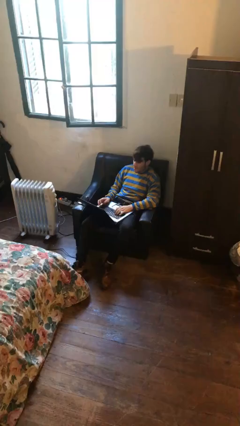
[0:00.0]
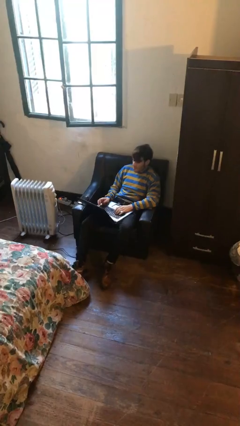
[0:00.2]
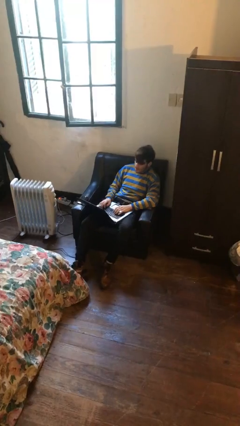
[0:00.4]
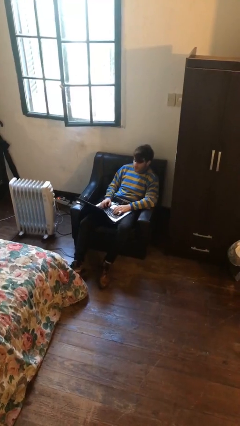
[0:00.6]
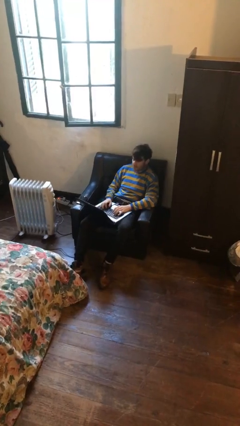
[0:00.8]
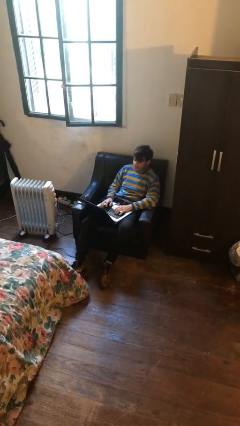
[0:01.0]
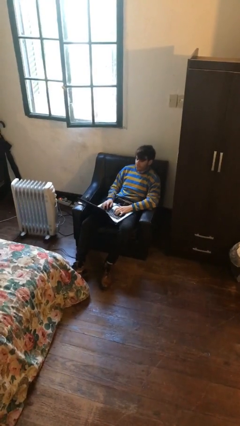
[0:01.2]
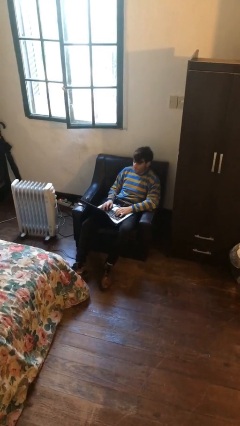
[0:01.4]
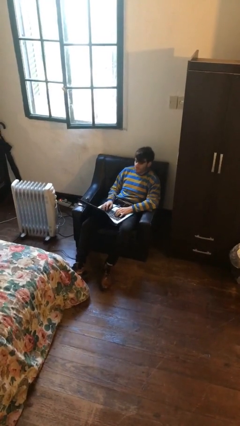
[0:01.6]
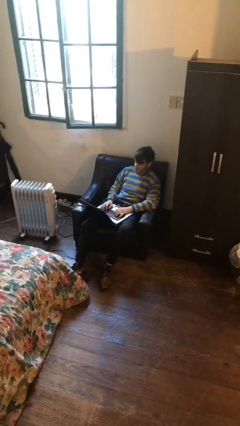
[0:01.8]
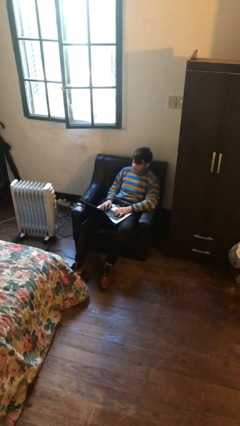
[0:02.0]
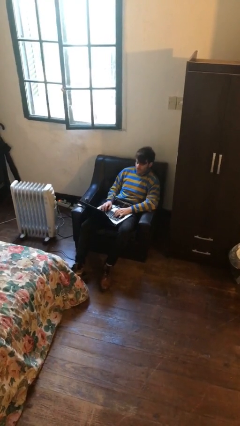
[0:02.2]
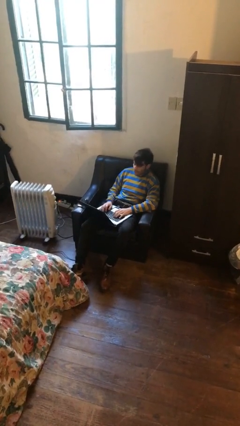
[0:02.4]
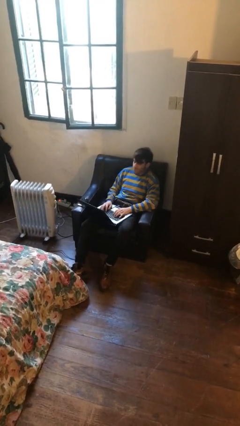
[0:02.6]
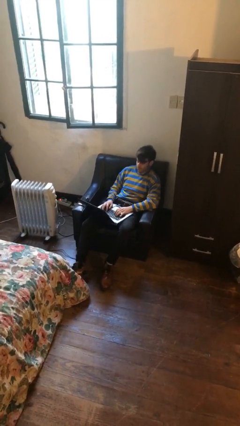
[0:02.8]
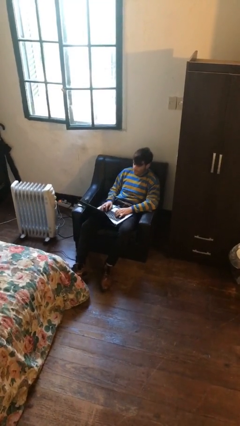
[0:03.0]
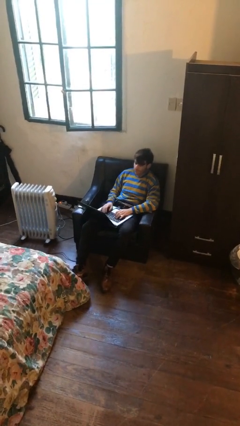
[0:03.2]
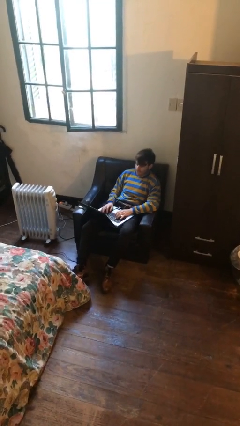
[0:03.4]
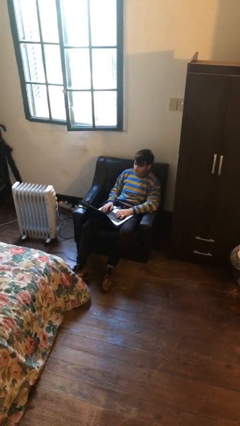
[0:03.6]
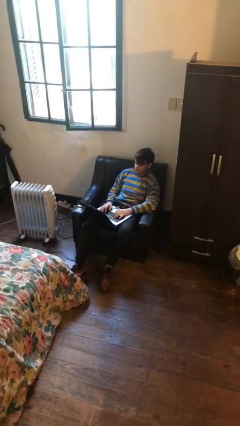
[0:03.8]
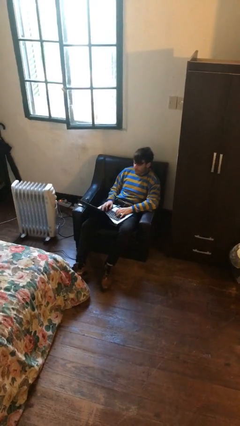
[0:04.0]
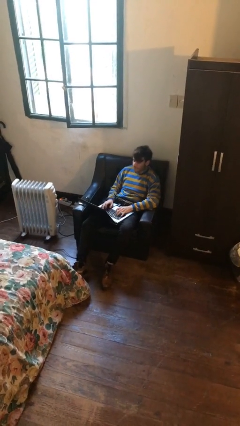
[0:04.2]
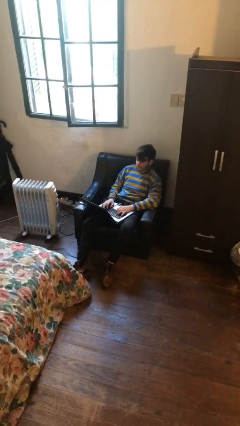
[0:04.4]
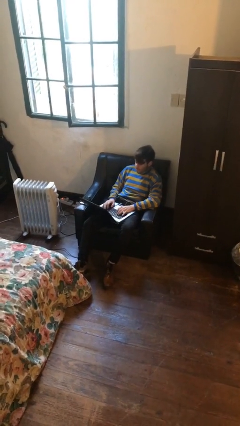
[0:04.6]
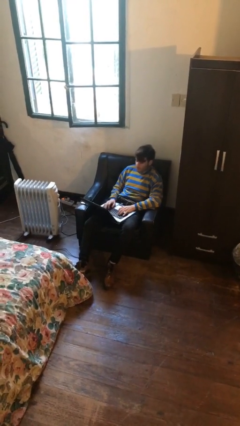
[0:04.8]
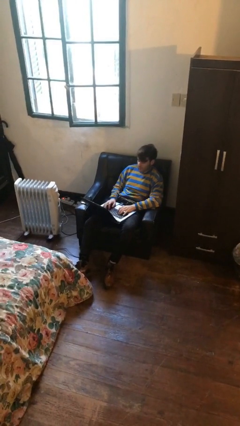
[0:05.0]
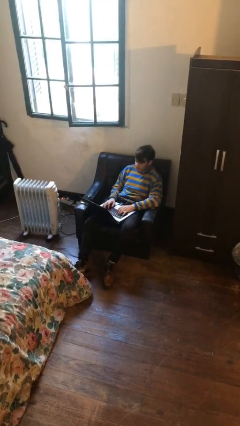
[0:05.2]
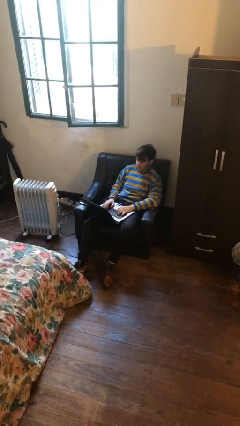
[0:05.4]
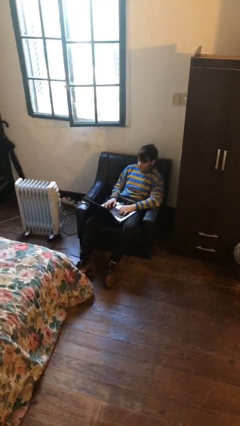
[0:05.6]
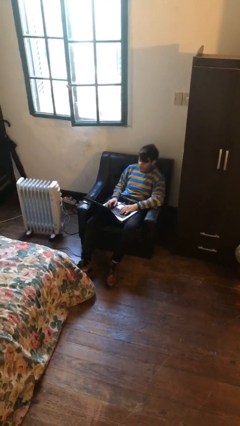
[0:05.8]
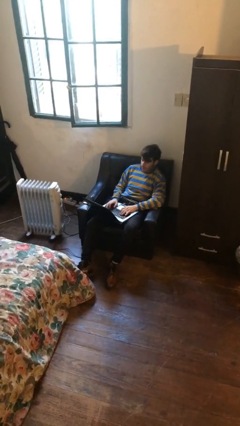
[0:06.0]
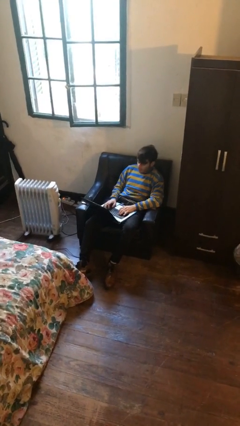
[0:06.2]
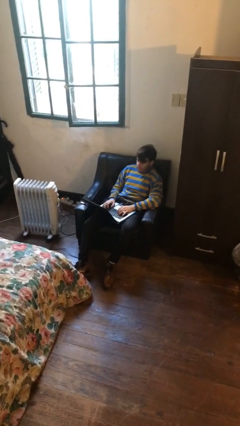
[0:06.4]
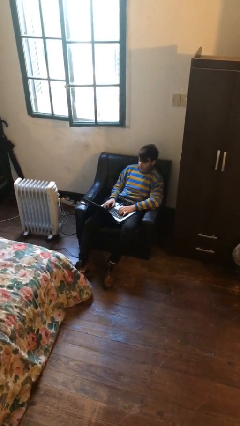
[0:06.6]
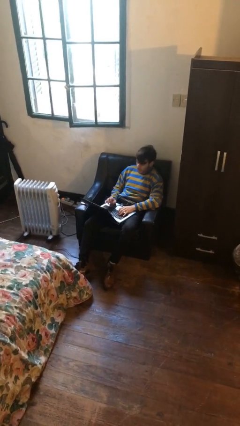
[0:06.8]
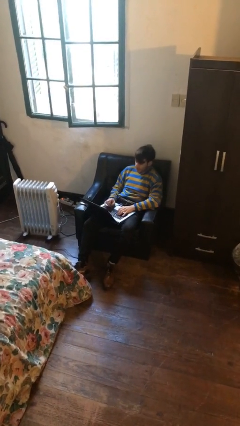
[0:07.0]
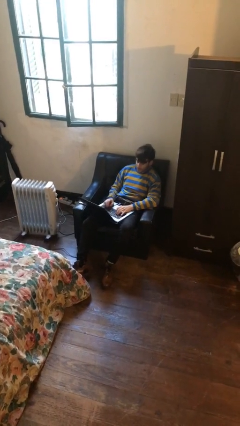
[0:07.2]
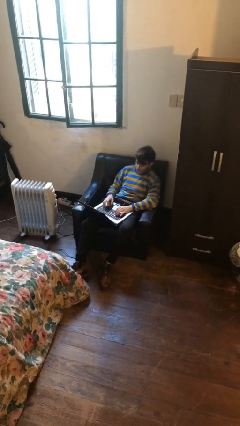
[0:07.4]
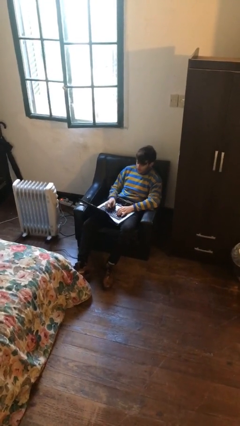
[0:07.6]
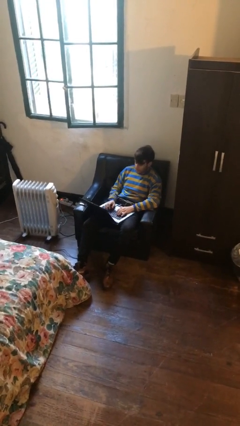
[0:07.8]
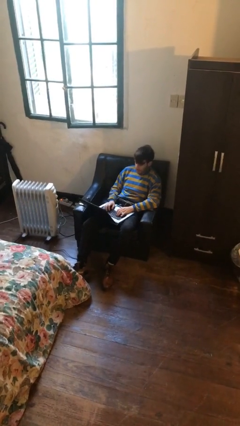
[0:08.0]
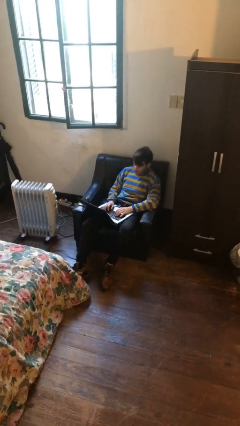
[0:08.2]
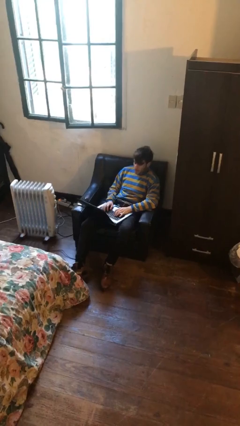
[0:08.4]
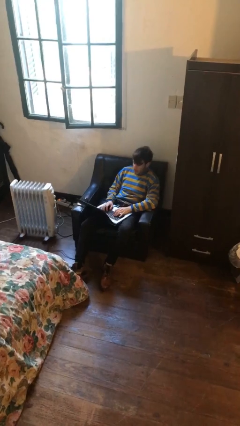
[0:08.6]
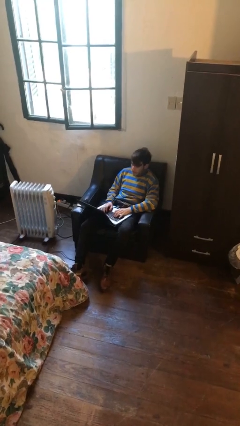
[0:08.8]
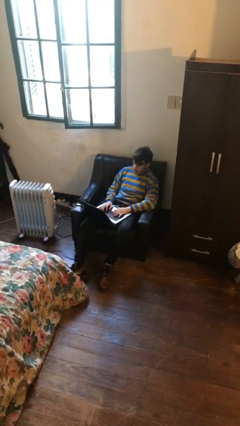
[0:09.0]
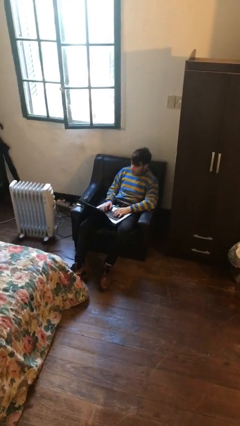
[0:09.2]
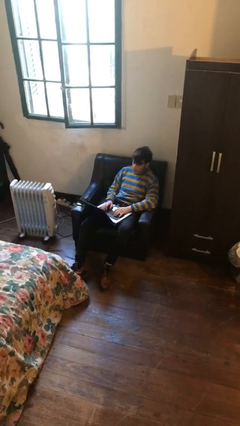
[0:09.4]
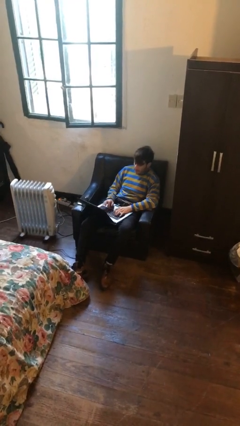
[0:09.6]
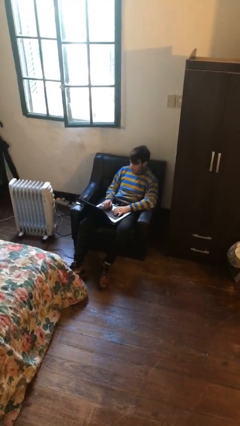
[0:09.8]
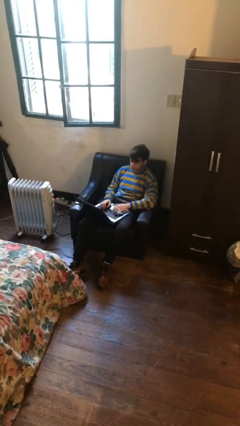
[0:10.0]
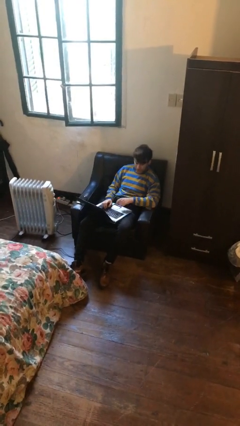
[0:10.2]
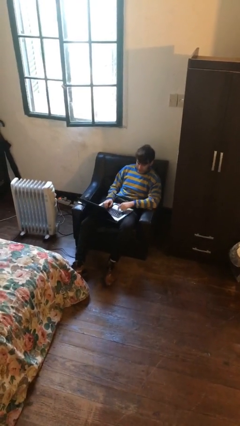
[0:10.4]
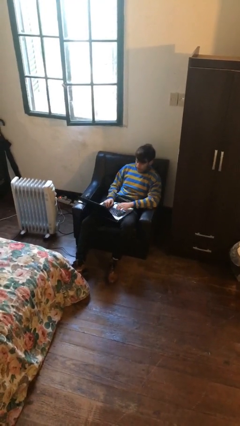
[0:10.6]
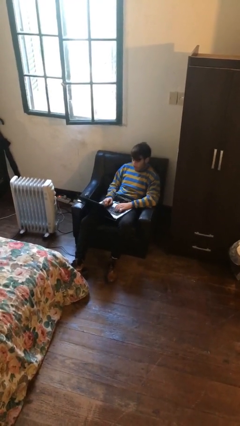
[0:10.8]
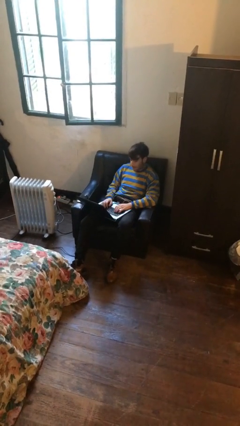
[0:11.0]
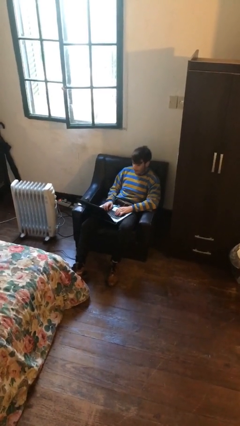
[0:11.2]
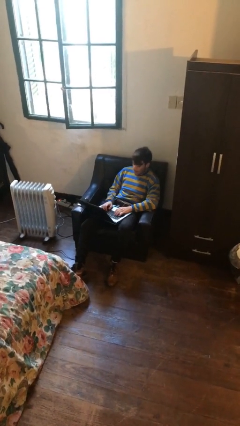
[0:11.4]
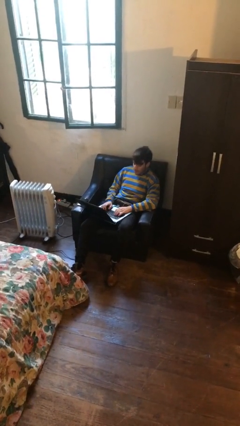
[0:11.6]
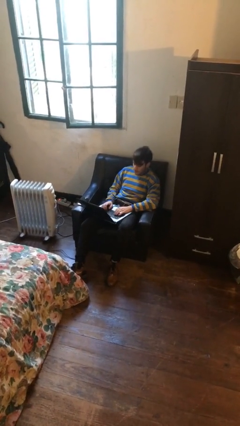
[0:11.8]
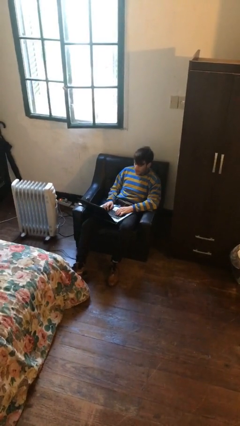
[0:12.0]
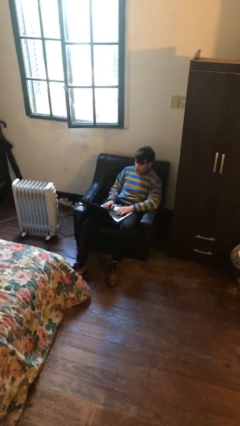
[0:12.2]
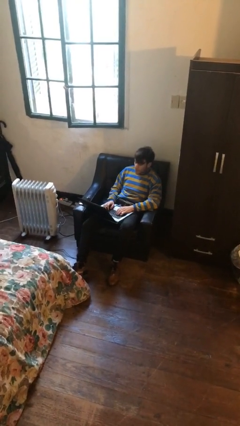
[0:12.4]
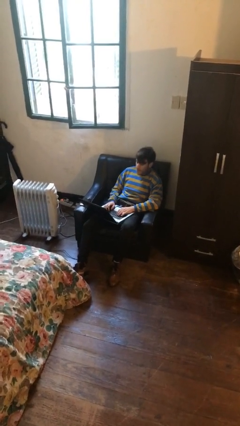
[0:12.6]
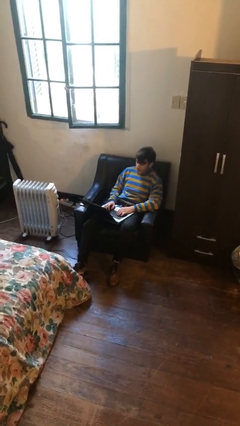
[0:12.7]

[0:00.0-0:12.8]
person interacts with laptop

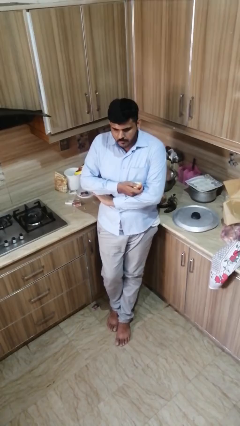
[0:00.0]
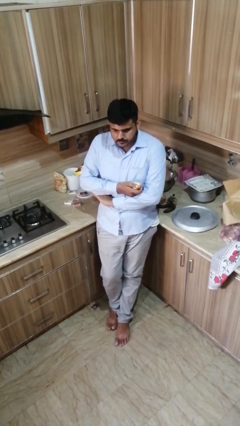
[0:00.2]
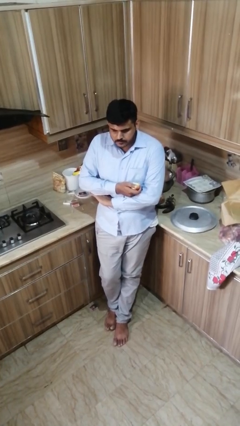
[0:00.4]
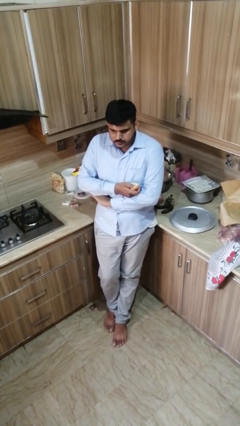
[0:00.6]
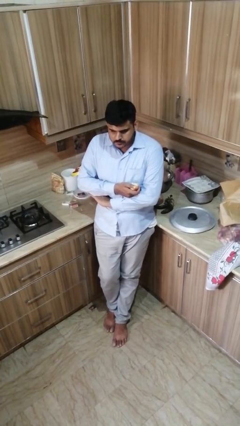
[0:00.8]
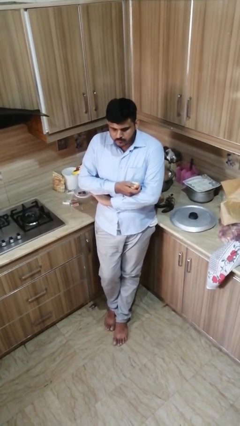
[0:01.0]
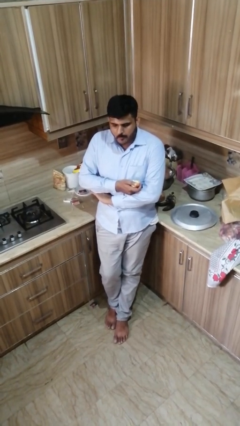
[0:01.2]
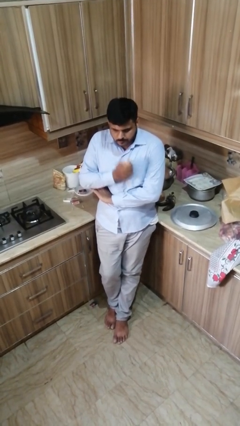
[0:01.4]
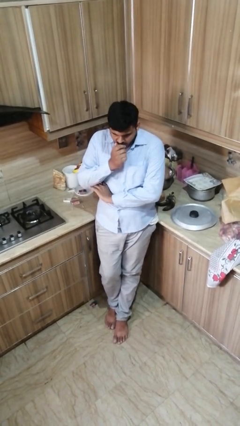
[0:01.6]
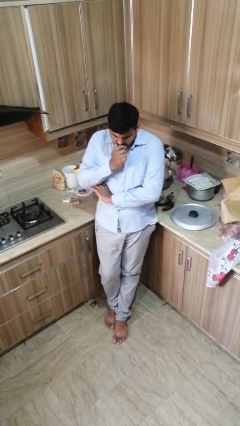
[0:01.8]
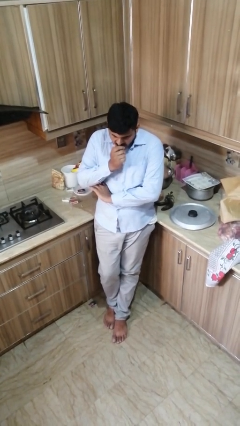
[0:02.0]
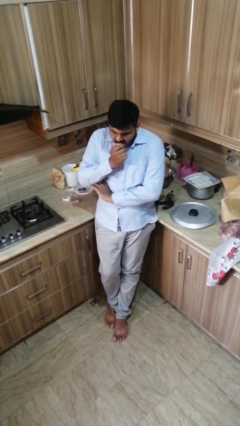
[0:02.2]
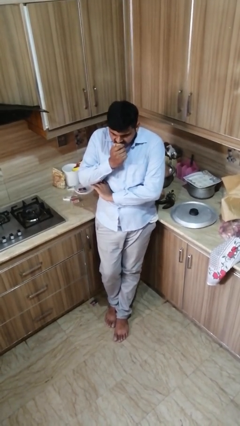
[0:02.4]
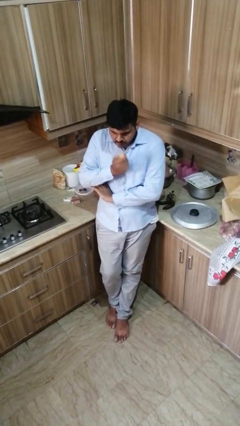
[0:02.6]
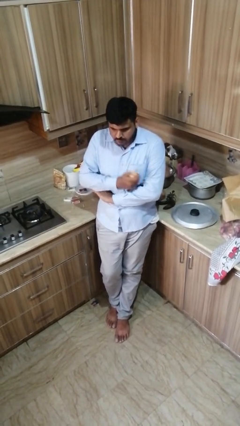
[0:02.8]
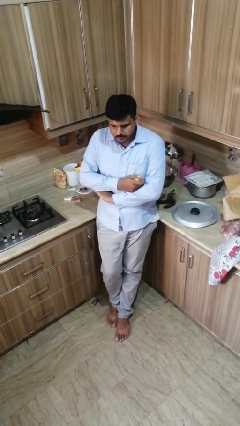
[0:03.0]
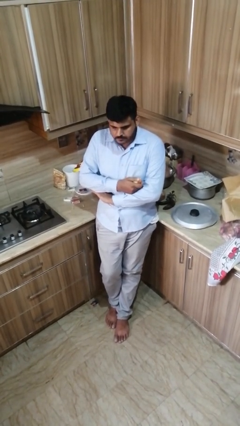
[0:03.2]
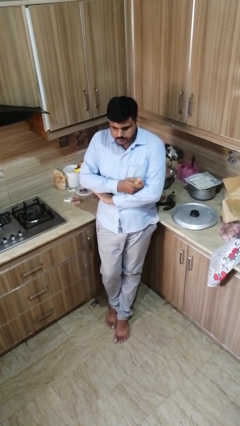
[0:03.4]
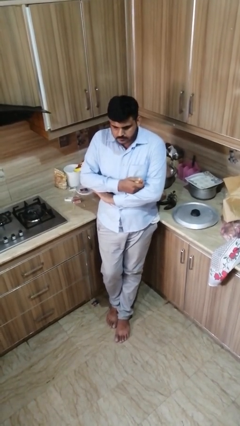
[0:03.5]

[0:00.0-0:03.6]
person eats apple

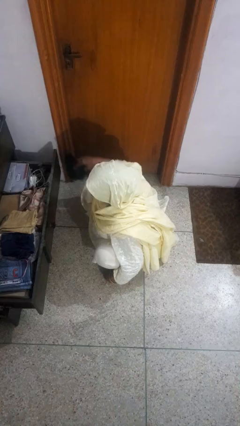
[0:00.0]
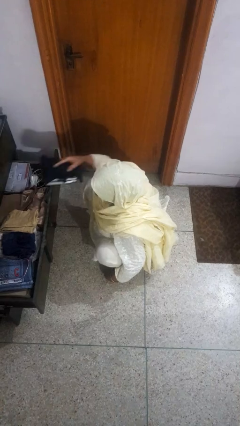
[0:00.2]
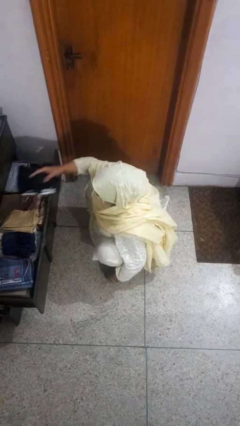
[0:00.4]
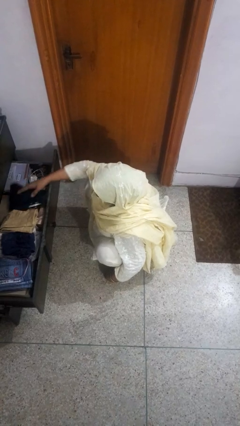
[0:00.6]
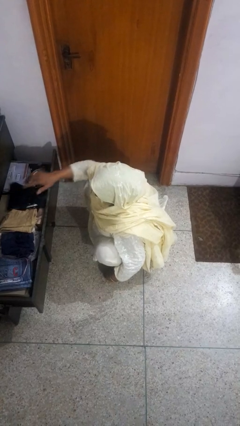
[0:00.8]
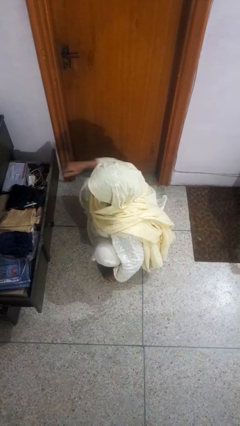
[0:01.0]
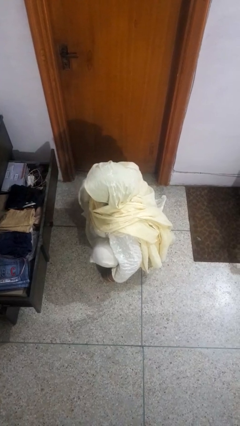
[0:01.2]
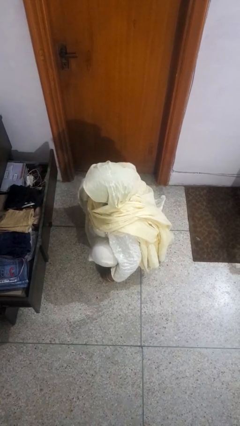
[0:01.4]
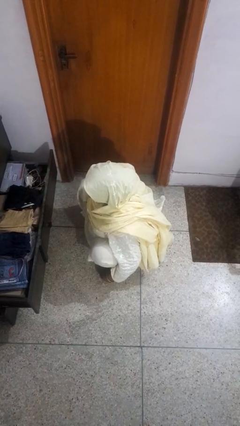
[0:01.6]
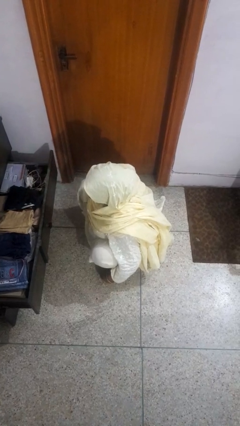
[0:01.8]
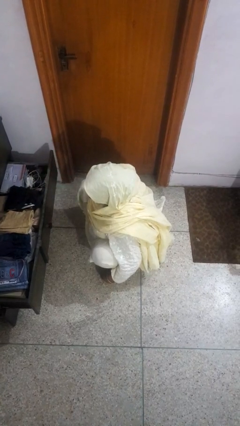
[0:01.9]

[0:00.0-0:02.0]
person puts clothes into dresser
